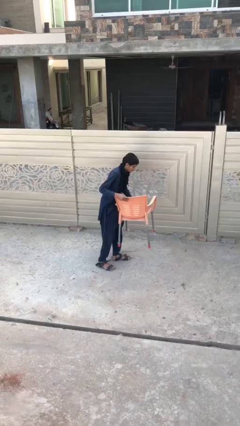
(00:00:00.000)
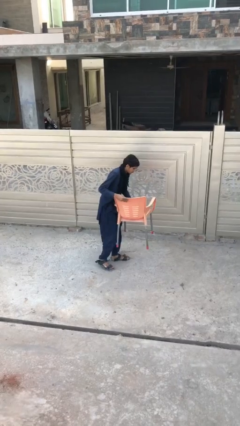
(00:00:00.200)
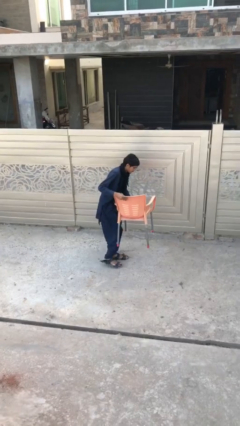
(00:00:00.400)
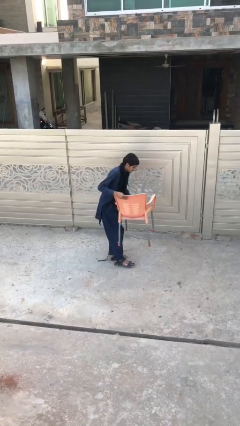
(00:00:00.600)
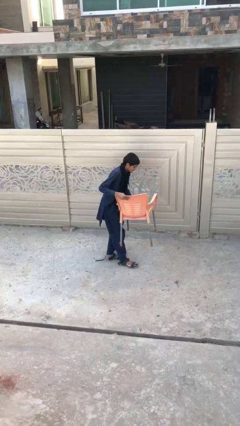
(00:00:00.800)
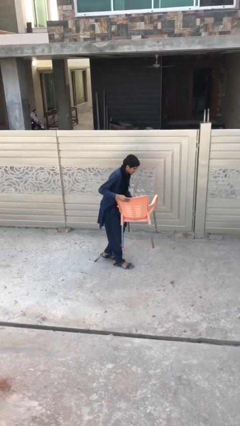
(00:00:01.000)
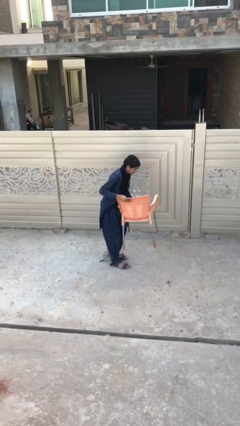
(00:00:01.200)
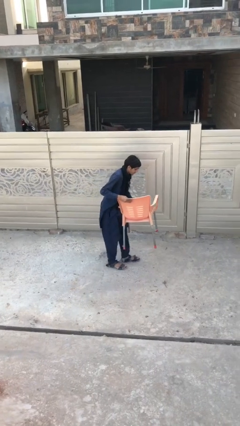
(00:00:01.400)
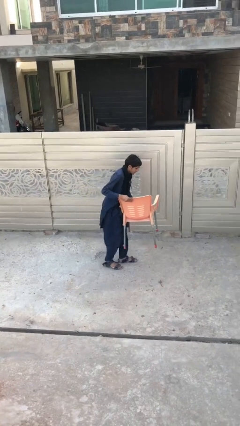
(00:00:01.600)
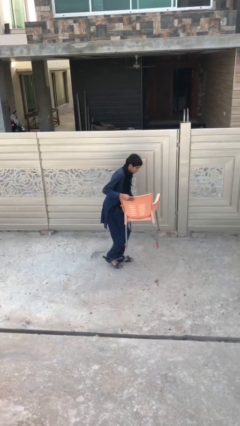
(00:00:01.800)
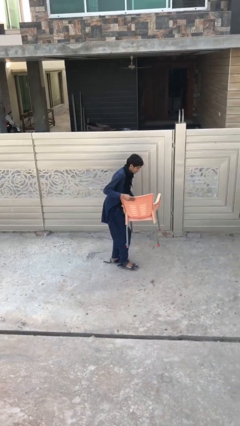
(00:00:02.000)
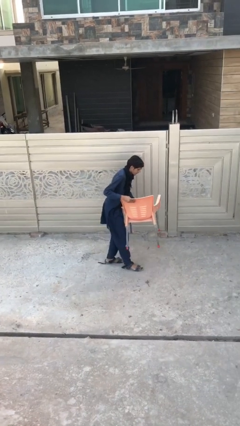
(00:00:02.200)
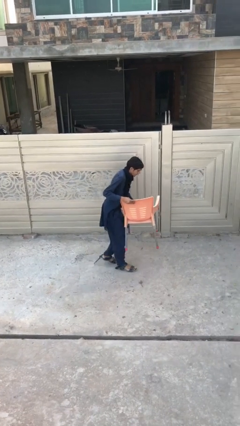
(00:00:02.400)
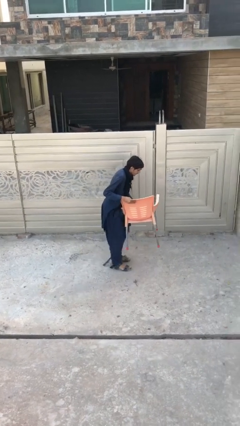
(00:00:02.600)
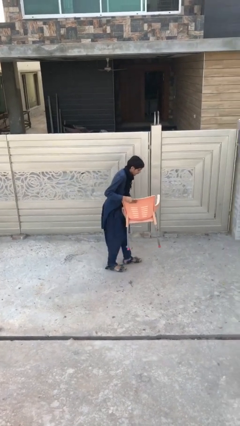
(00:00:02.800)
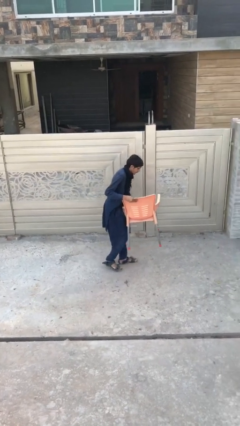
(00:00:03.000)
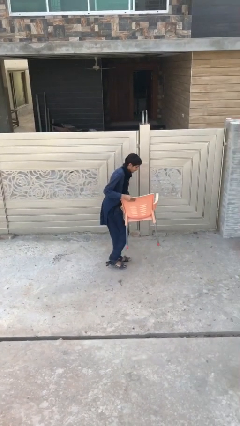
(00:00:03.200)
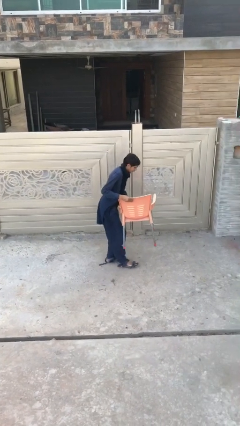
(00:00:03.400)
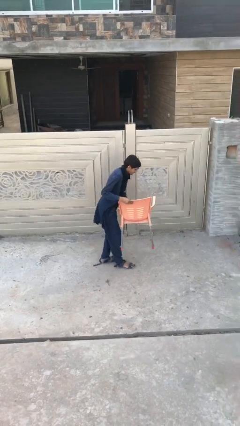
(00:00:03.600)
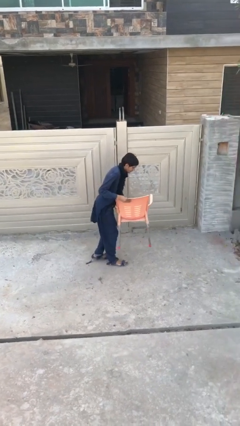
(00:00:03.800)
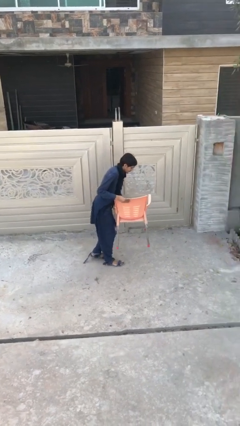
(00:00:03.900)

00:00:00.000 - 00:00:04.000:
person carries heavy object

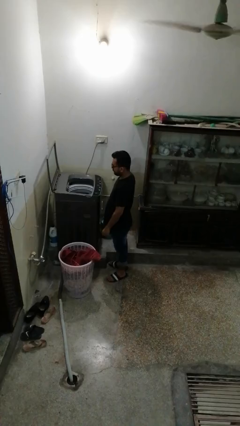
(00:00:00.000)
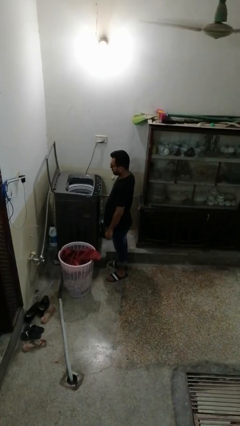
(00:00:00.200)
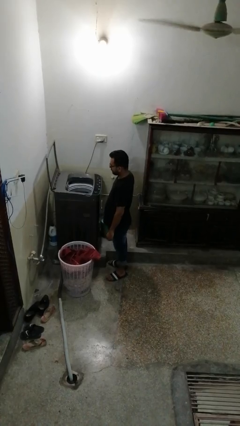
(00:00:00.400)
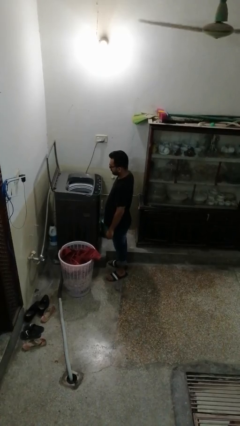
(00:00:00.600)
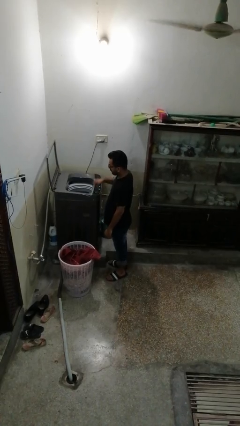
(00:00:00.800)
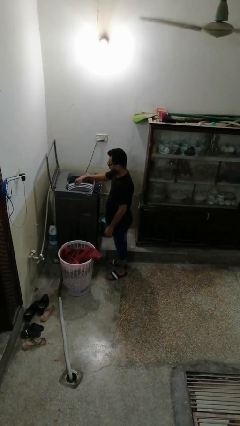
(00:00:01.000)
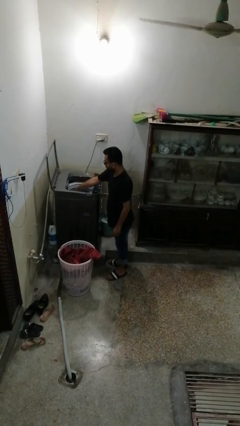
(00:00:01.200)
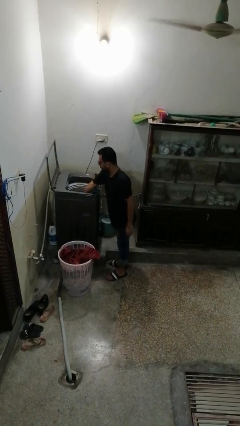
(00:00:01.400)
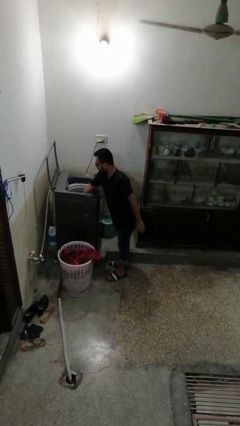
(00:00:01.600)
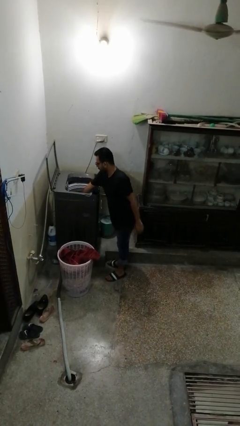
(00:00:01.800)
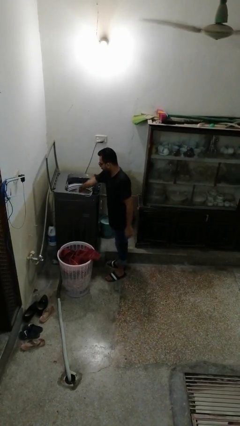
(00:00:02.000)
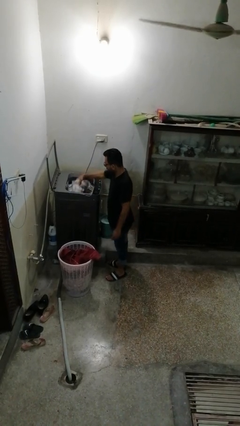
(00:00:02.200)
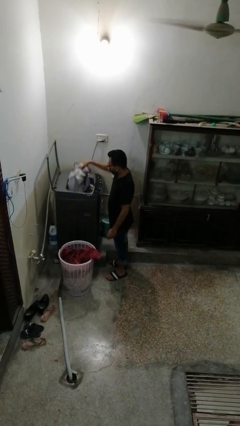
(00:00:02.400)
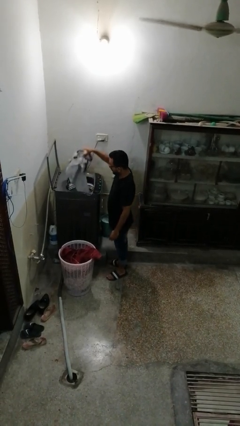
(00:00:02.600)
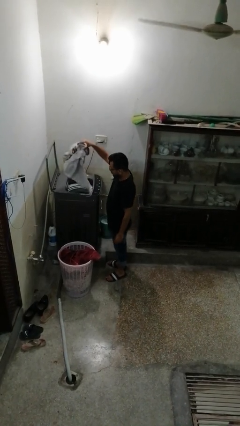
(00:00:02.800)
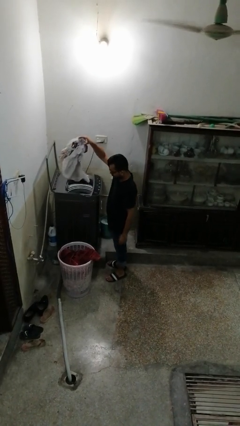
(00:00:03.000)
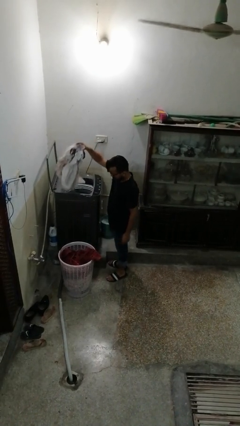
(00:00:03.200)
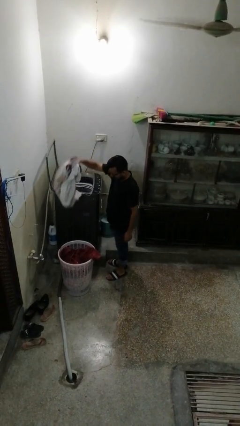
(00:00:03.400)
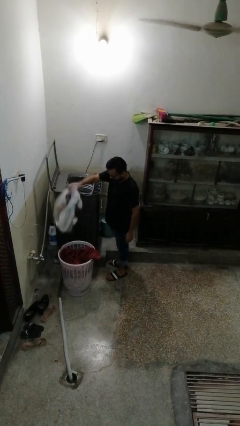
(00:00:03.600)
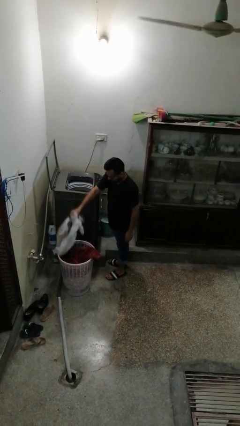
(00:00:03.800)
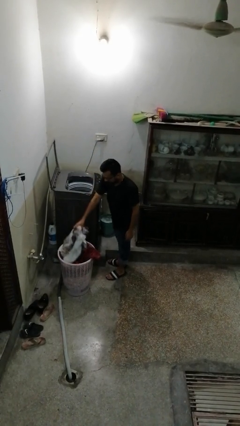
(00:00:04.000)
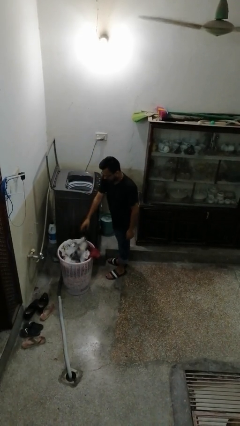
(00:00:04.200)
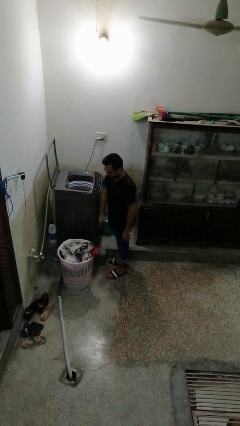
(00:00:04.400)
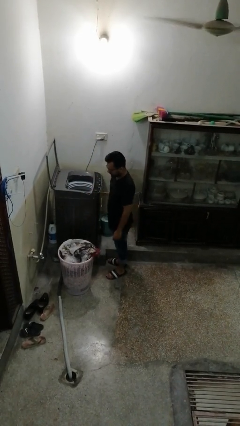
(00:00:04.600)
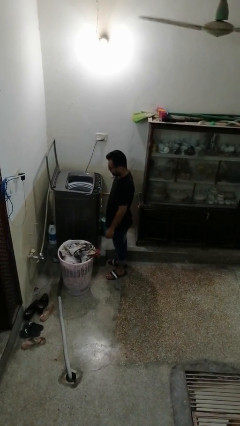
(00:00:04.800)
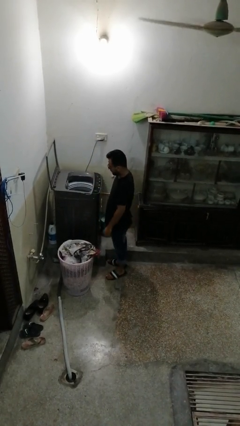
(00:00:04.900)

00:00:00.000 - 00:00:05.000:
person unloads clotheswasher

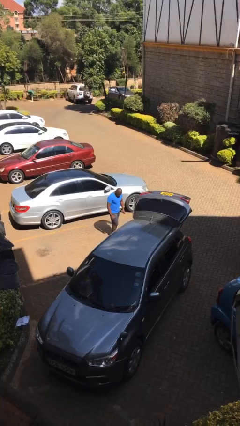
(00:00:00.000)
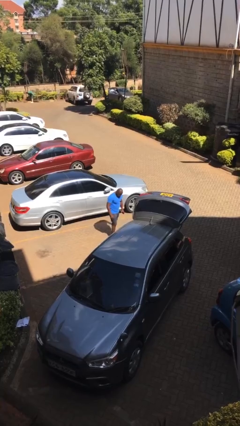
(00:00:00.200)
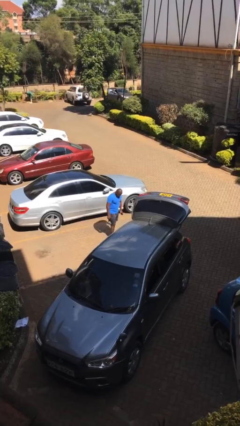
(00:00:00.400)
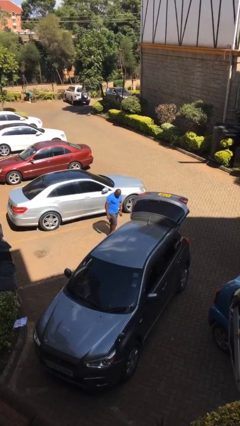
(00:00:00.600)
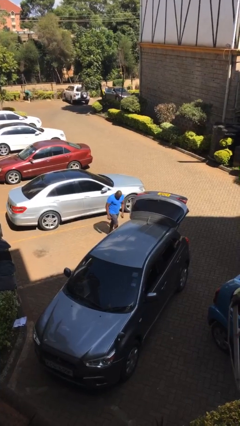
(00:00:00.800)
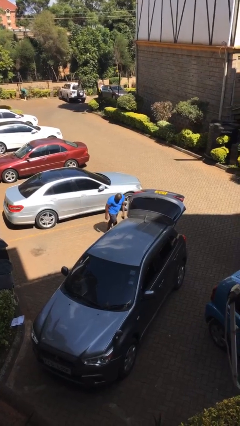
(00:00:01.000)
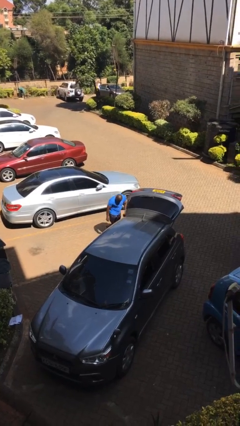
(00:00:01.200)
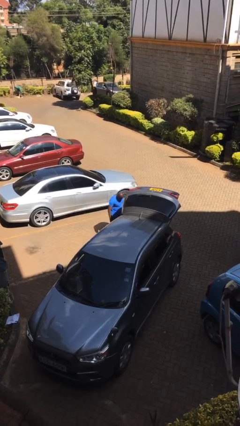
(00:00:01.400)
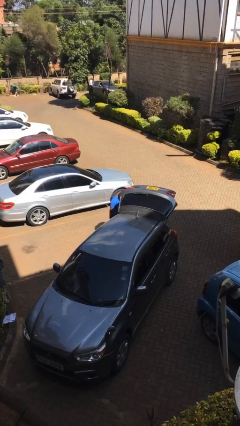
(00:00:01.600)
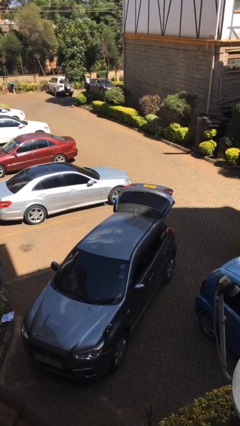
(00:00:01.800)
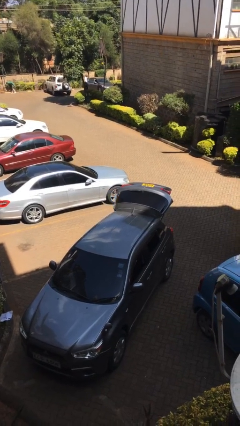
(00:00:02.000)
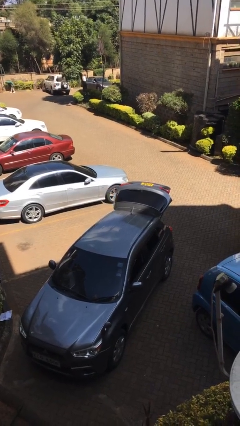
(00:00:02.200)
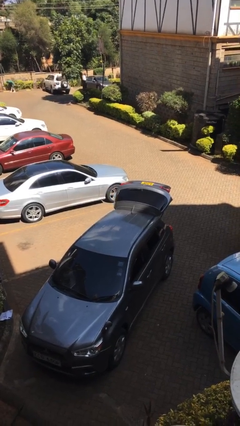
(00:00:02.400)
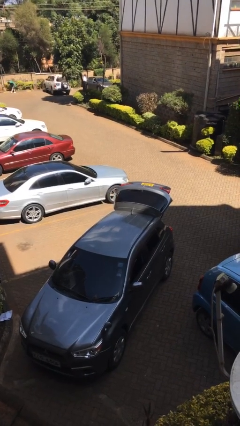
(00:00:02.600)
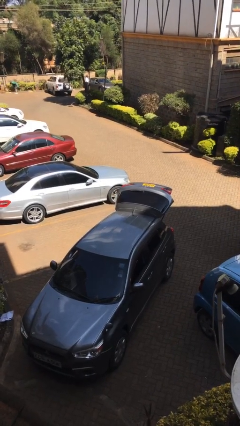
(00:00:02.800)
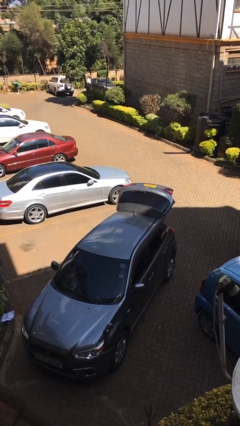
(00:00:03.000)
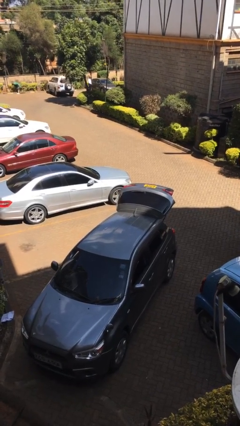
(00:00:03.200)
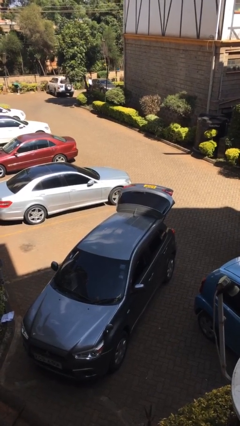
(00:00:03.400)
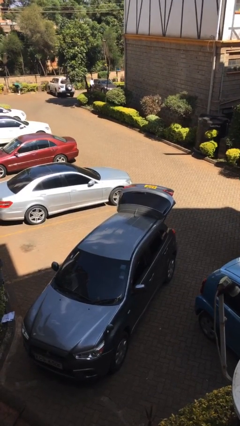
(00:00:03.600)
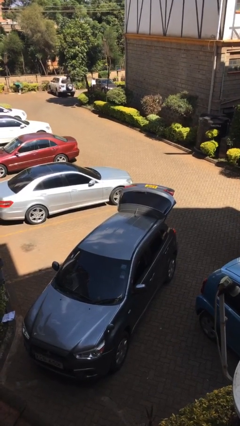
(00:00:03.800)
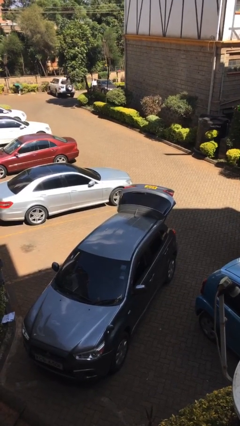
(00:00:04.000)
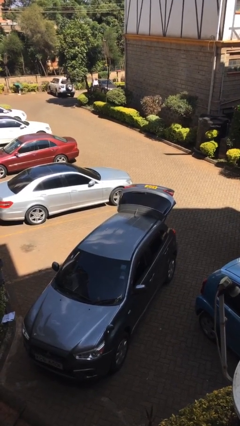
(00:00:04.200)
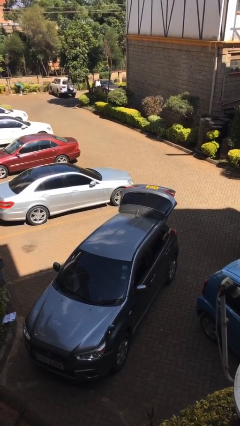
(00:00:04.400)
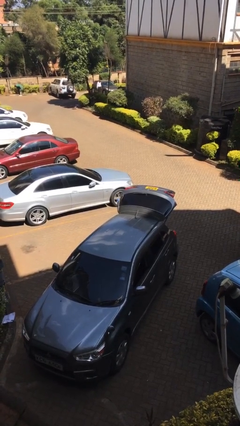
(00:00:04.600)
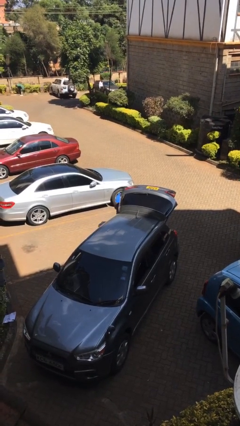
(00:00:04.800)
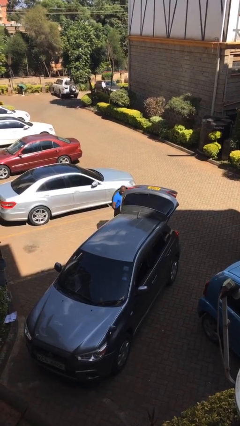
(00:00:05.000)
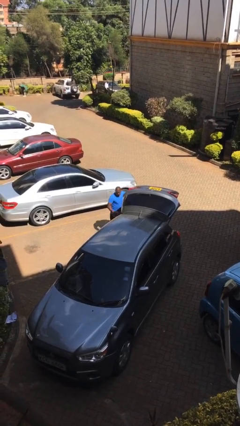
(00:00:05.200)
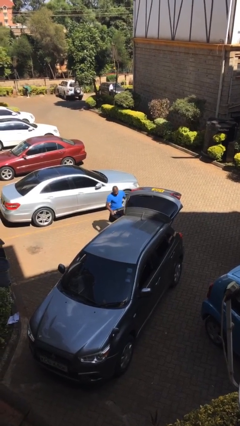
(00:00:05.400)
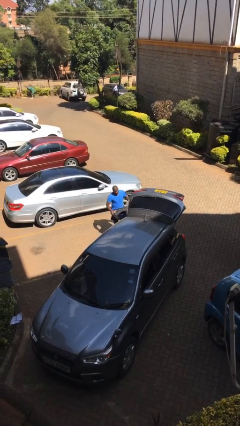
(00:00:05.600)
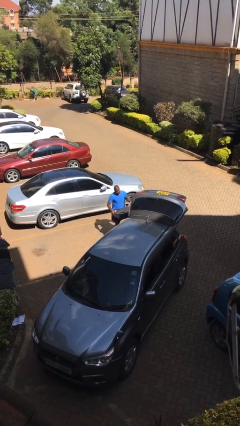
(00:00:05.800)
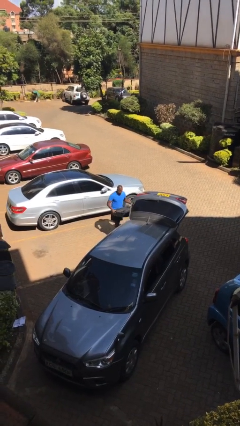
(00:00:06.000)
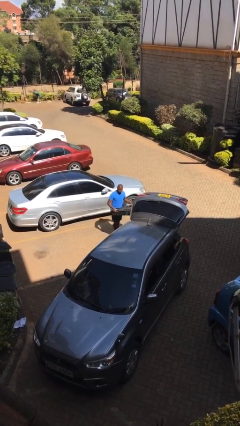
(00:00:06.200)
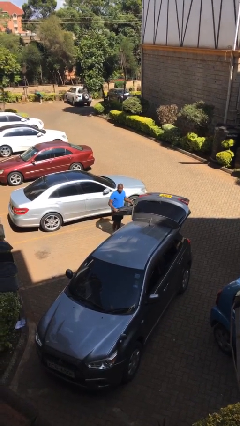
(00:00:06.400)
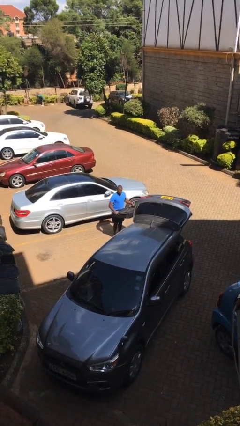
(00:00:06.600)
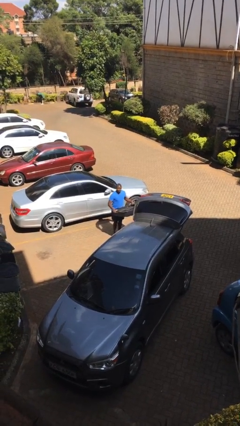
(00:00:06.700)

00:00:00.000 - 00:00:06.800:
person unloads car

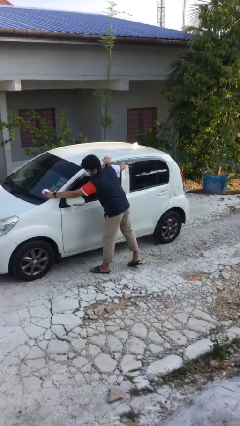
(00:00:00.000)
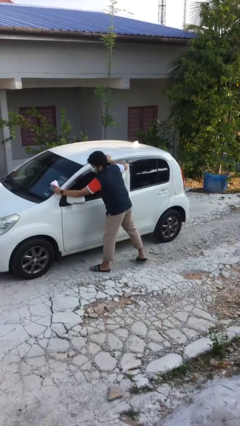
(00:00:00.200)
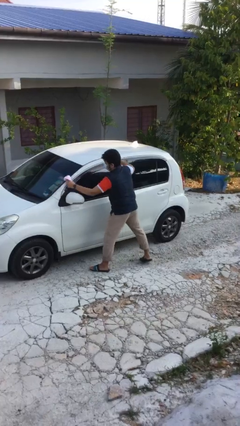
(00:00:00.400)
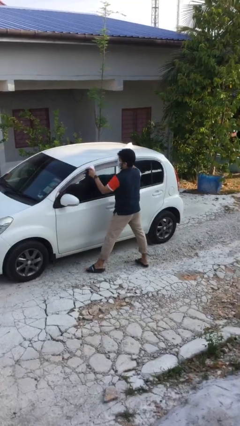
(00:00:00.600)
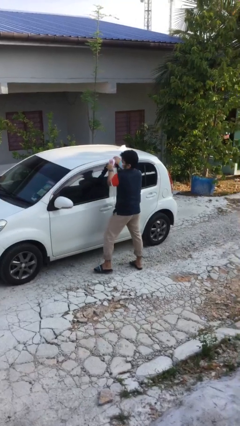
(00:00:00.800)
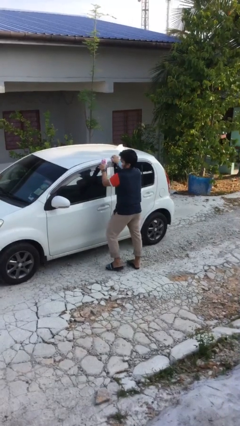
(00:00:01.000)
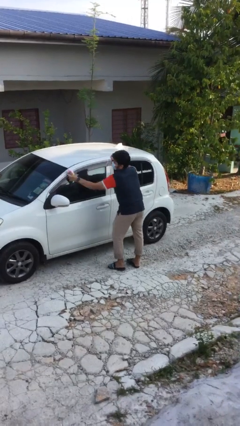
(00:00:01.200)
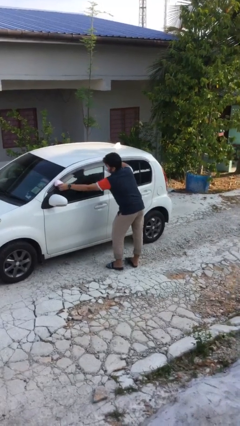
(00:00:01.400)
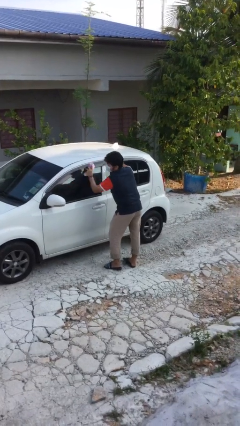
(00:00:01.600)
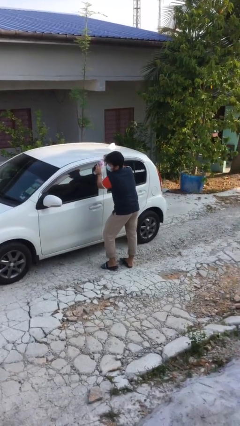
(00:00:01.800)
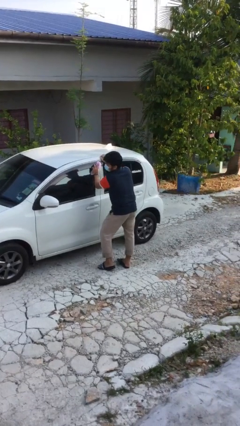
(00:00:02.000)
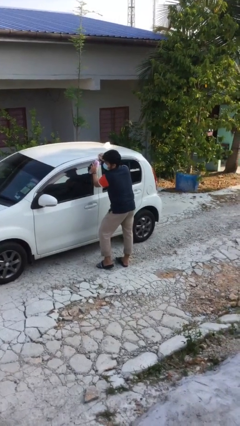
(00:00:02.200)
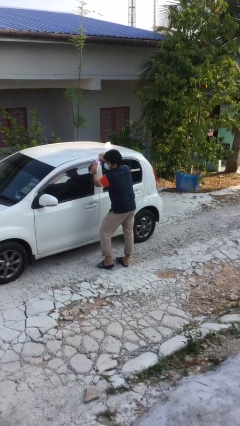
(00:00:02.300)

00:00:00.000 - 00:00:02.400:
person polishes car with rag
